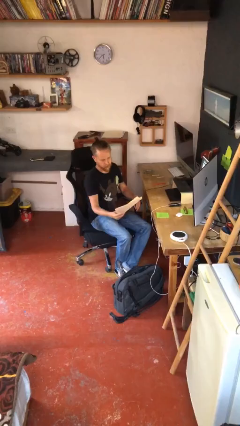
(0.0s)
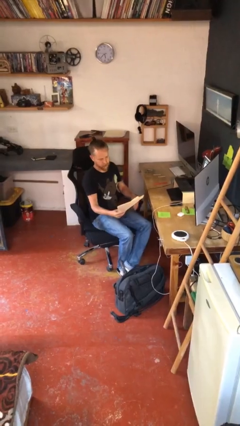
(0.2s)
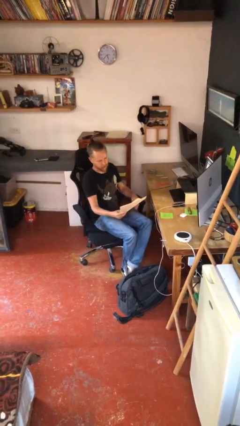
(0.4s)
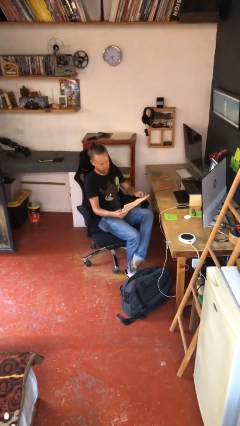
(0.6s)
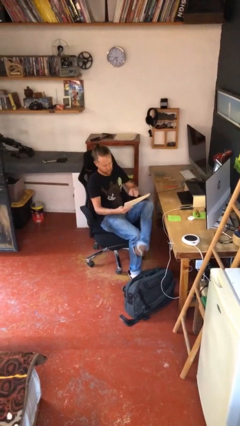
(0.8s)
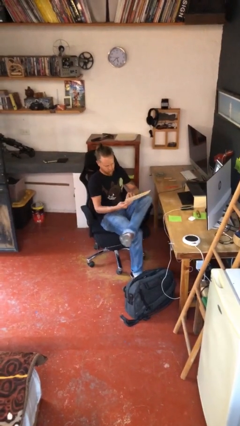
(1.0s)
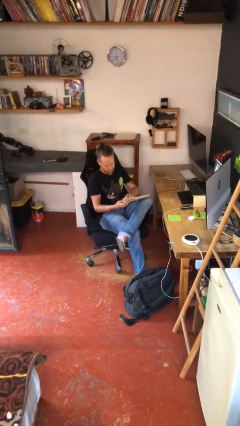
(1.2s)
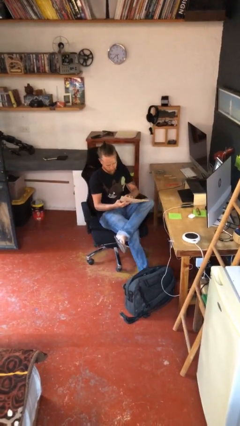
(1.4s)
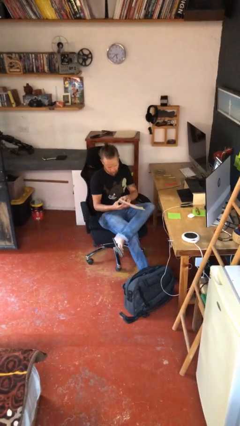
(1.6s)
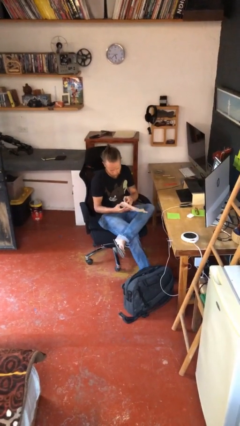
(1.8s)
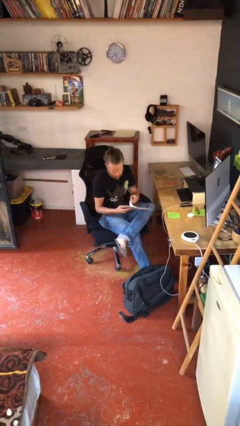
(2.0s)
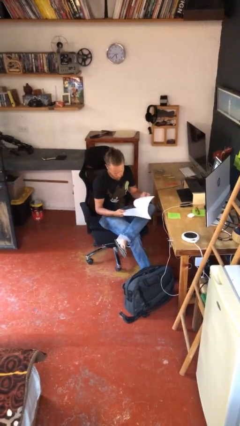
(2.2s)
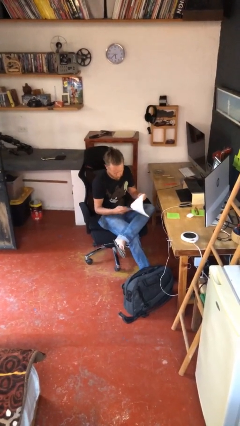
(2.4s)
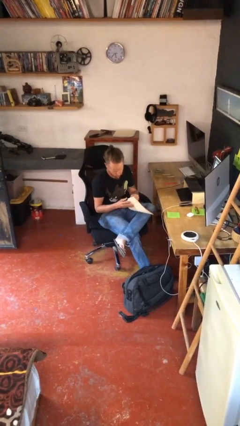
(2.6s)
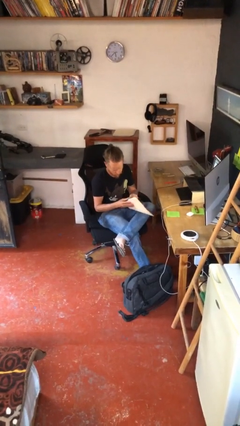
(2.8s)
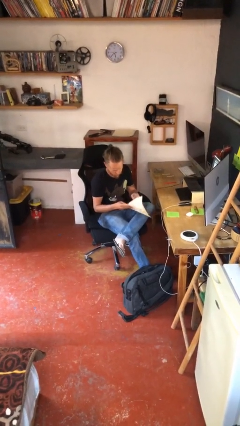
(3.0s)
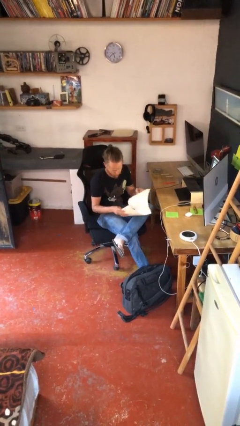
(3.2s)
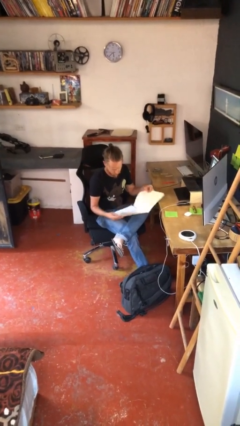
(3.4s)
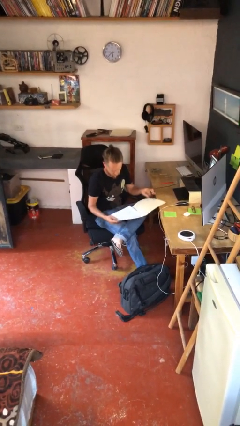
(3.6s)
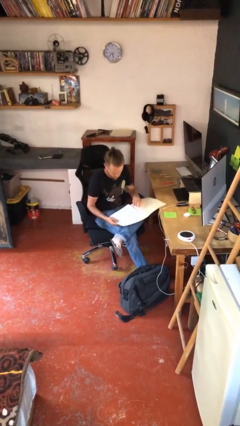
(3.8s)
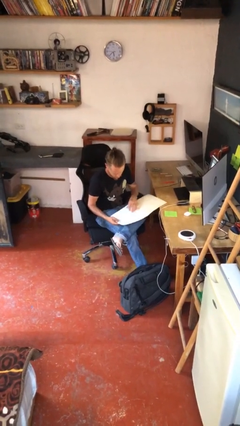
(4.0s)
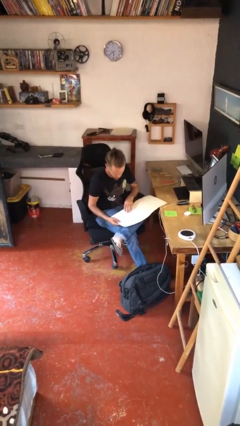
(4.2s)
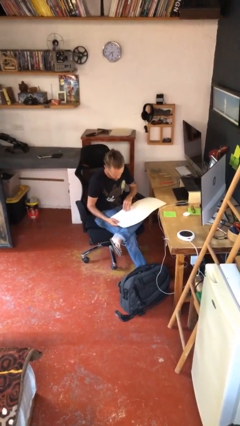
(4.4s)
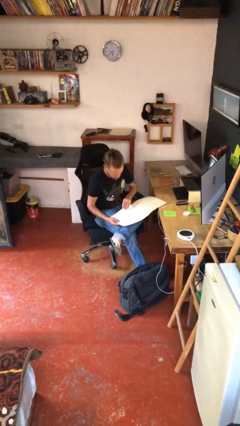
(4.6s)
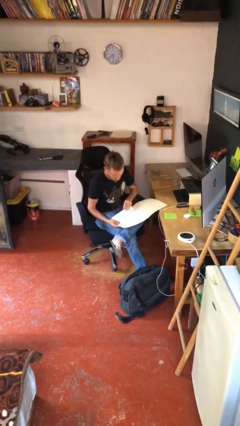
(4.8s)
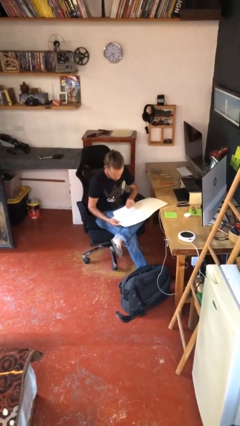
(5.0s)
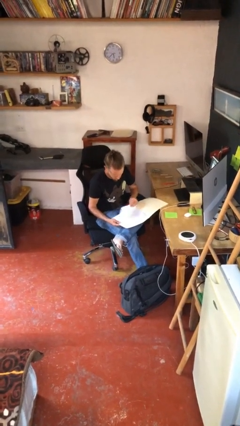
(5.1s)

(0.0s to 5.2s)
person reads document

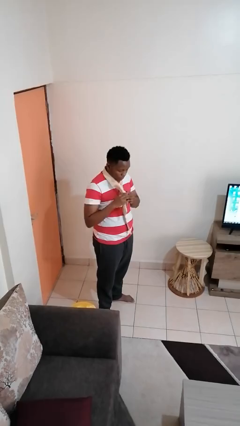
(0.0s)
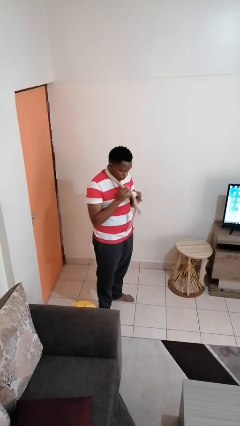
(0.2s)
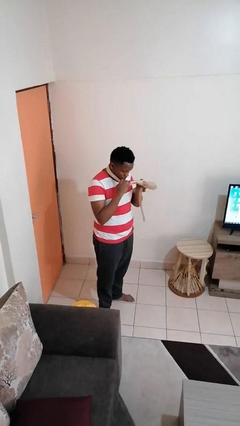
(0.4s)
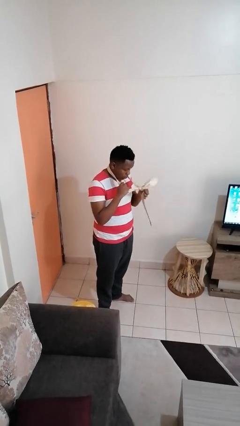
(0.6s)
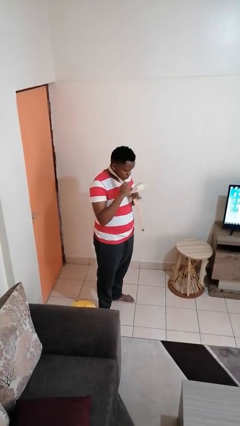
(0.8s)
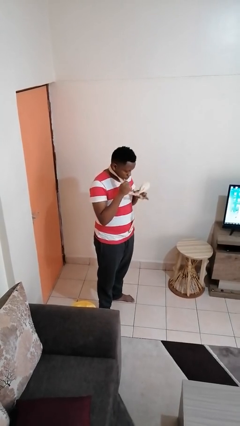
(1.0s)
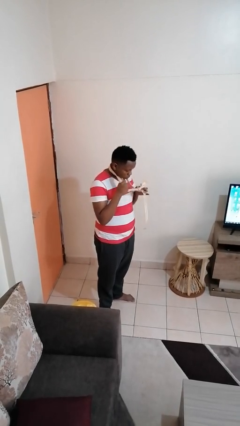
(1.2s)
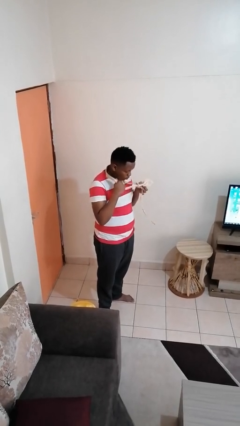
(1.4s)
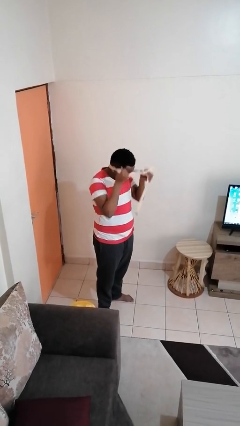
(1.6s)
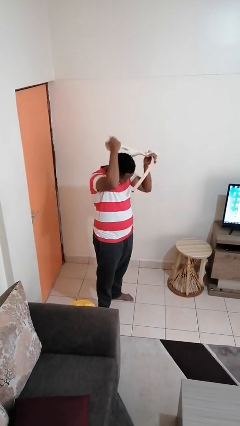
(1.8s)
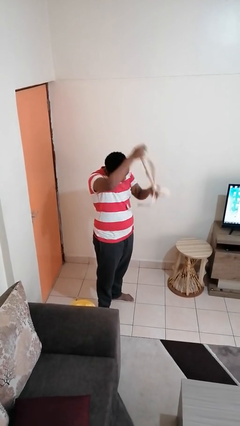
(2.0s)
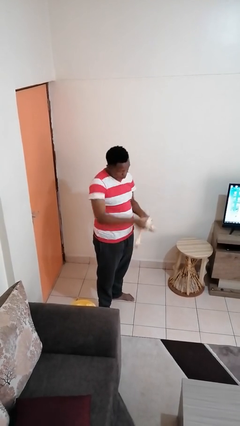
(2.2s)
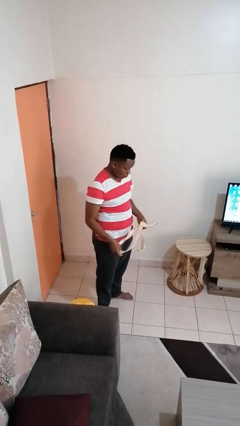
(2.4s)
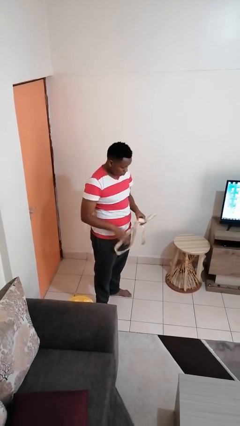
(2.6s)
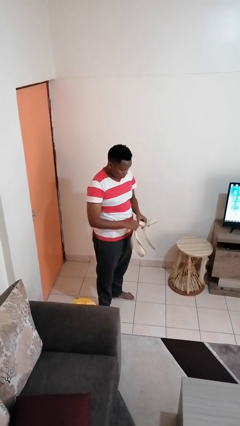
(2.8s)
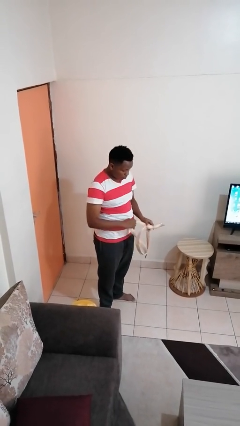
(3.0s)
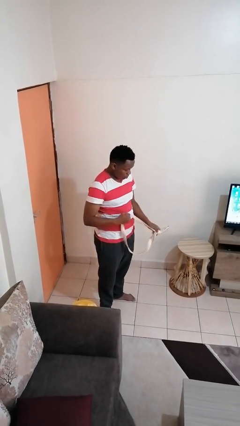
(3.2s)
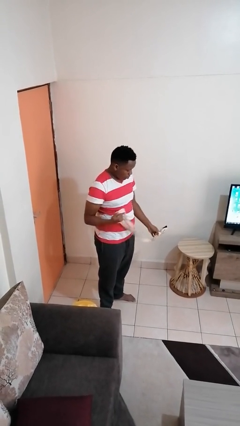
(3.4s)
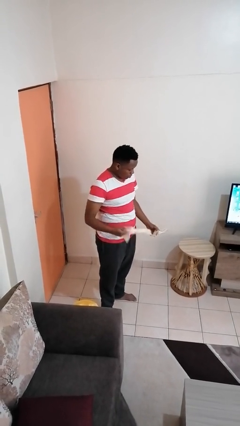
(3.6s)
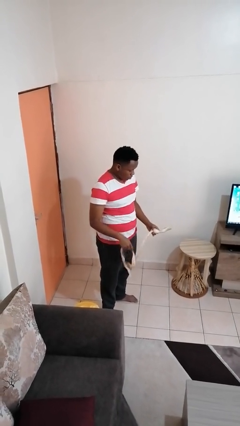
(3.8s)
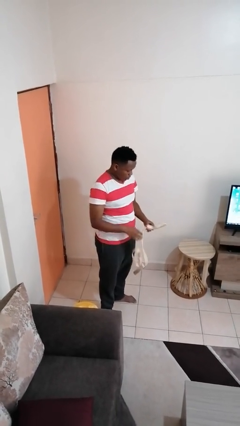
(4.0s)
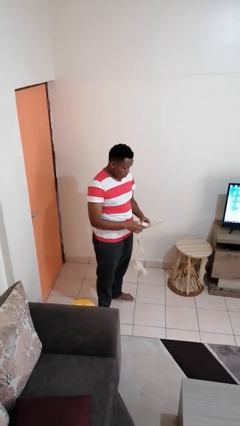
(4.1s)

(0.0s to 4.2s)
person takes off necktie

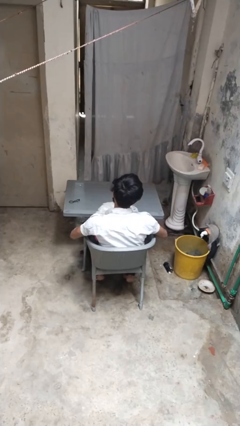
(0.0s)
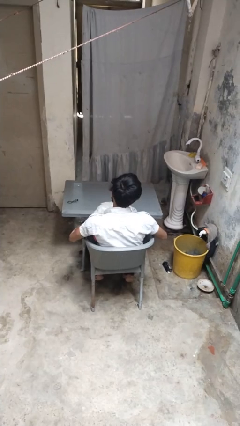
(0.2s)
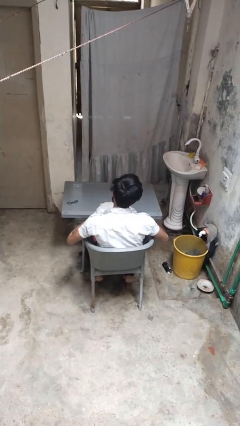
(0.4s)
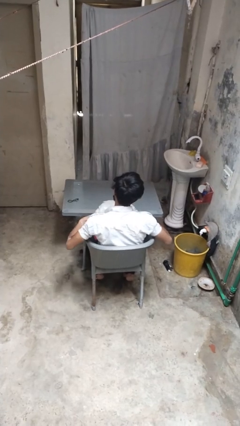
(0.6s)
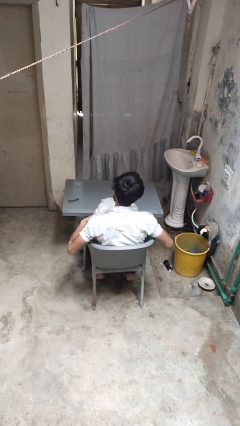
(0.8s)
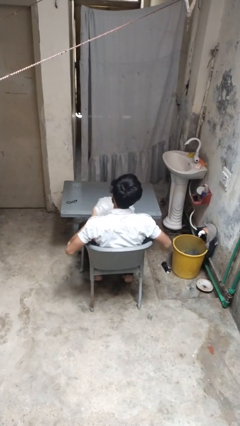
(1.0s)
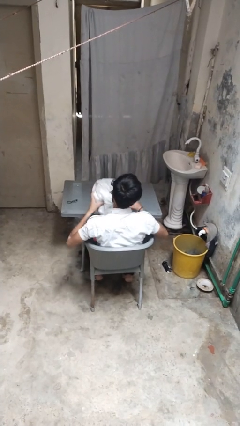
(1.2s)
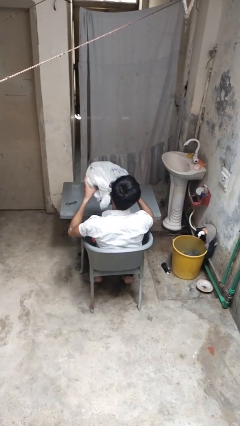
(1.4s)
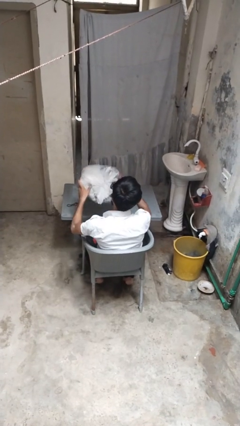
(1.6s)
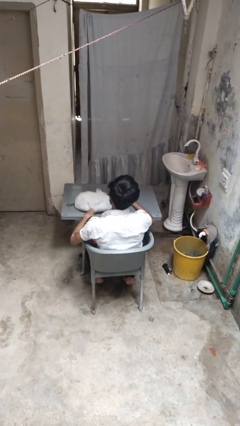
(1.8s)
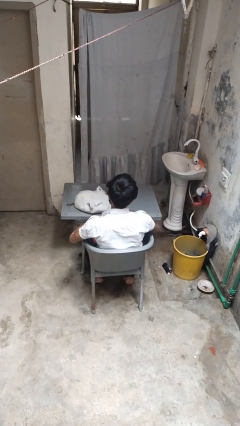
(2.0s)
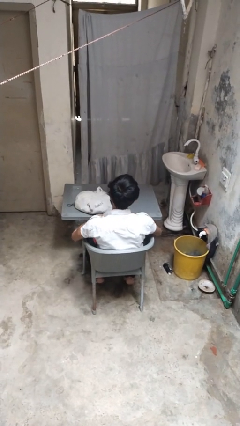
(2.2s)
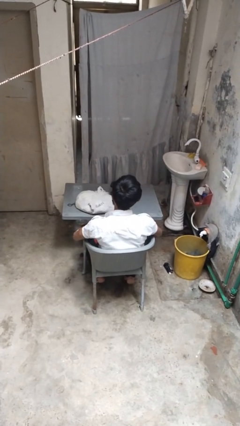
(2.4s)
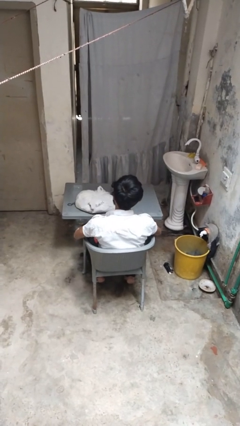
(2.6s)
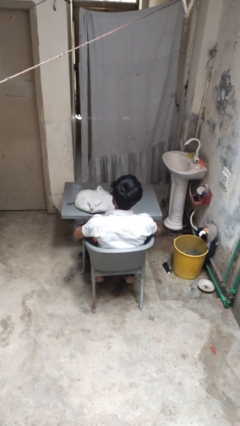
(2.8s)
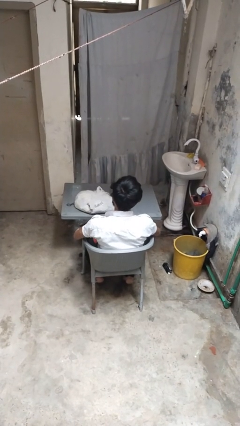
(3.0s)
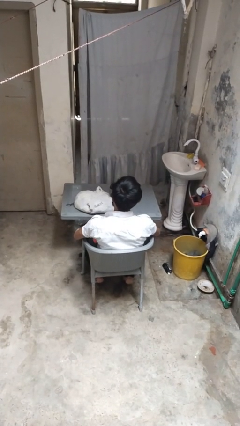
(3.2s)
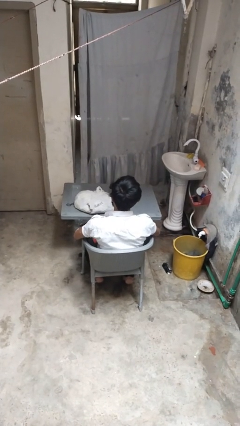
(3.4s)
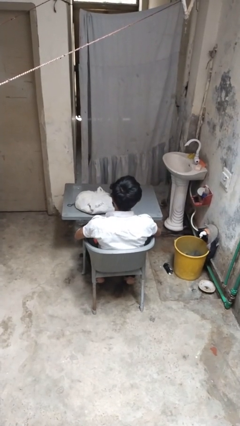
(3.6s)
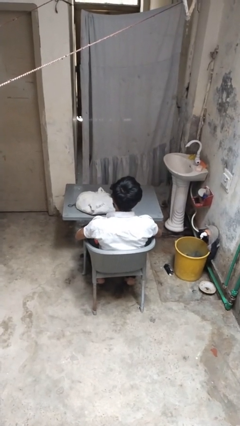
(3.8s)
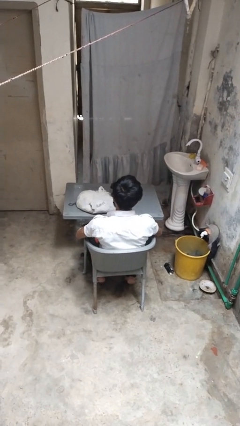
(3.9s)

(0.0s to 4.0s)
person throws object on table

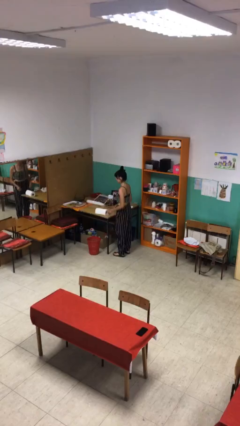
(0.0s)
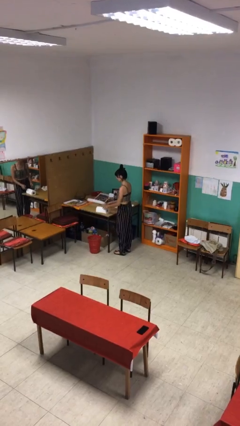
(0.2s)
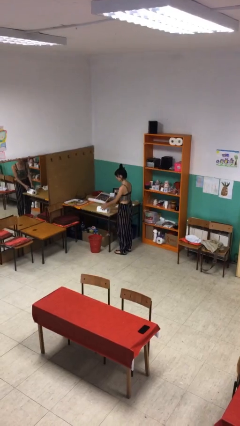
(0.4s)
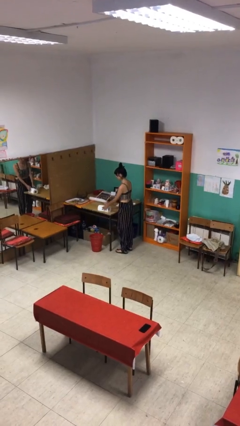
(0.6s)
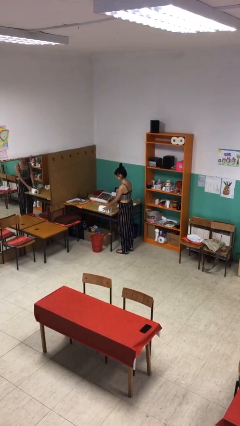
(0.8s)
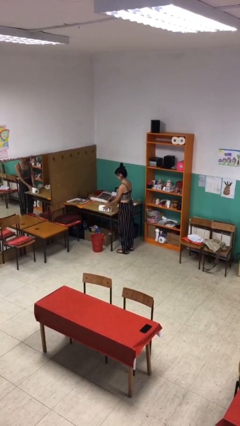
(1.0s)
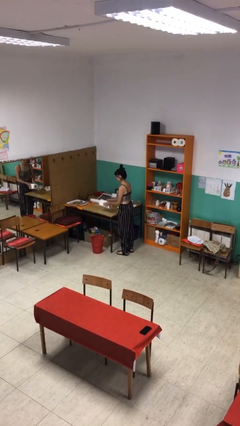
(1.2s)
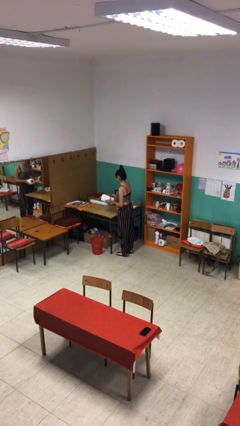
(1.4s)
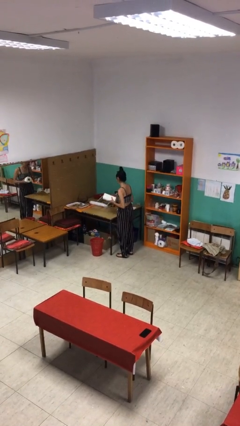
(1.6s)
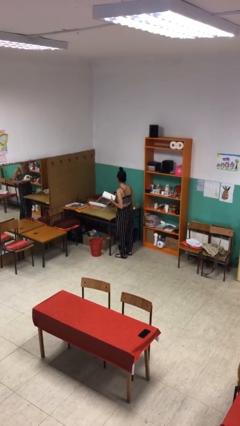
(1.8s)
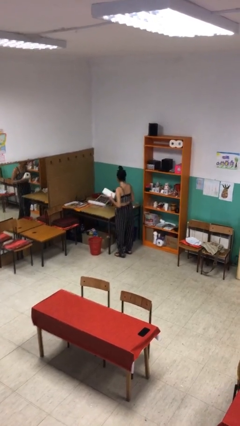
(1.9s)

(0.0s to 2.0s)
person picks up object from table

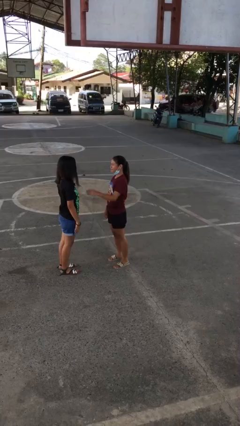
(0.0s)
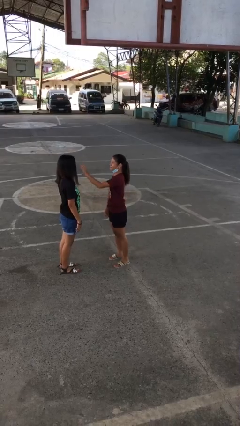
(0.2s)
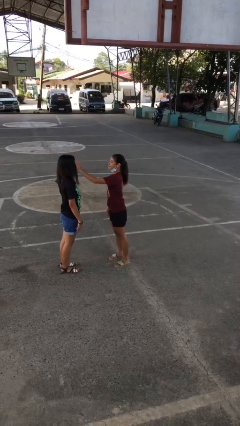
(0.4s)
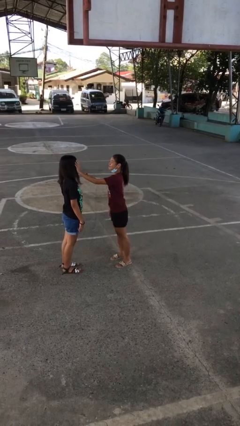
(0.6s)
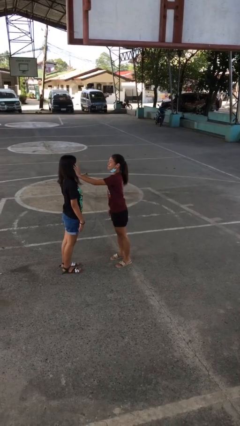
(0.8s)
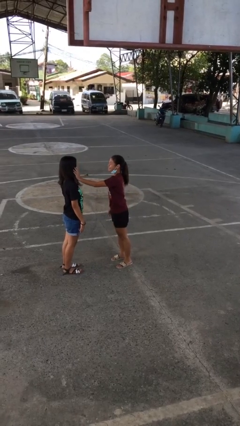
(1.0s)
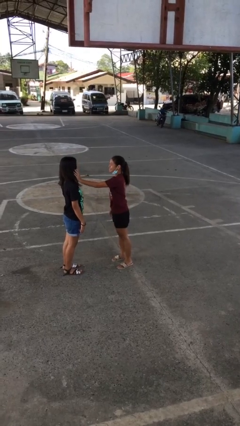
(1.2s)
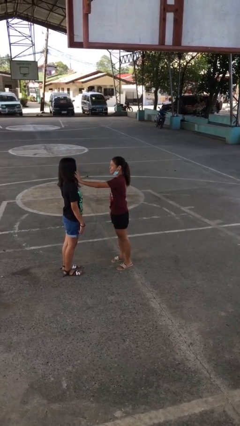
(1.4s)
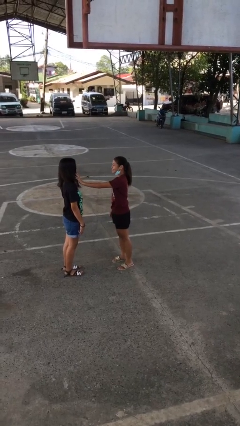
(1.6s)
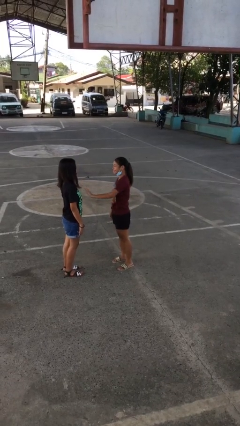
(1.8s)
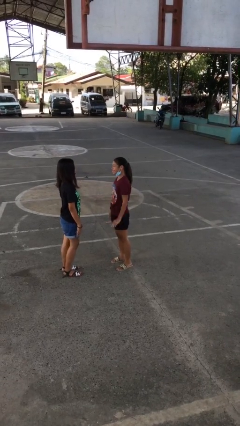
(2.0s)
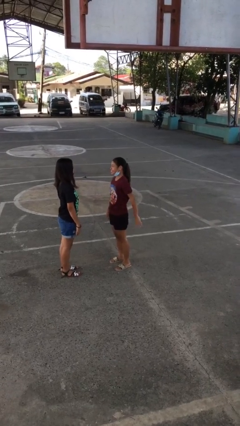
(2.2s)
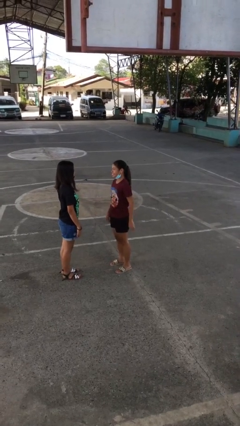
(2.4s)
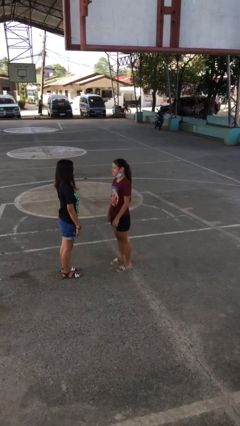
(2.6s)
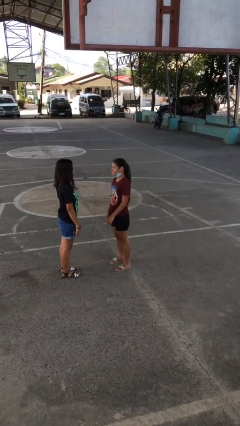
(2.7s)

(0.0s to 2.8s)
person touches face of person
